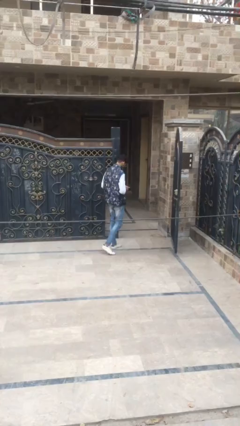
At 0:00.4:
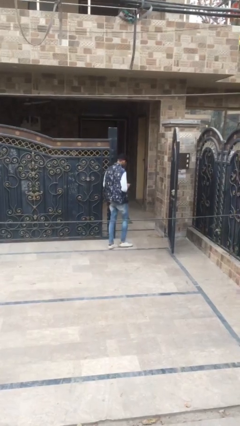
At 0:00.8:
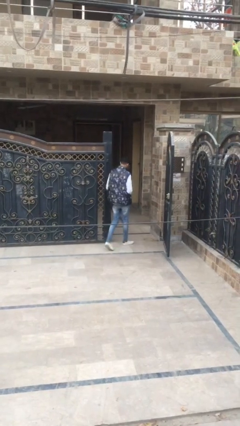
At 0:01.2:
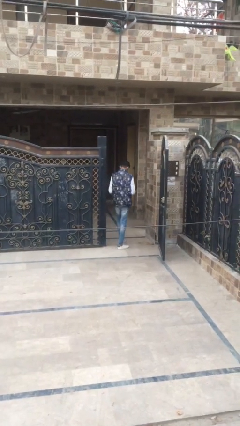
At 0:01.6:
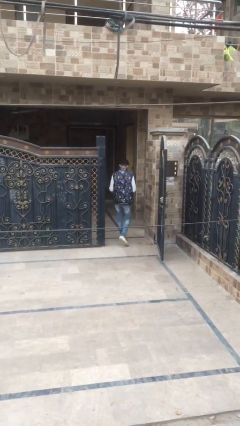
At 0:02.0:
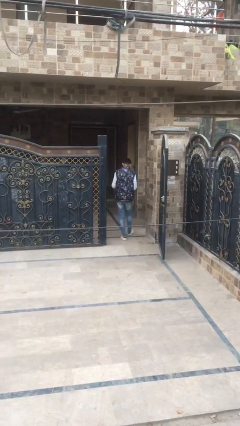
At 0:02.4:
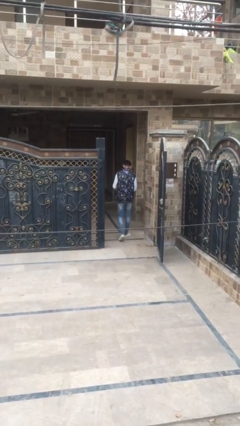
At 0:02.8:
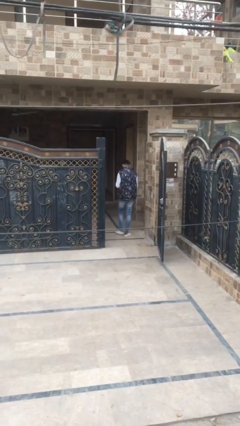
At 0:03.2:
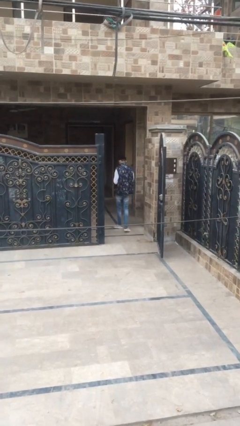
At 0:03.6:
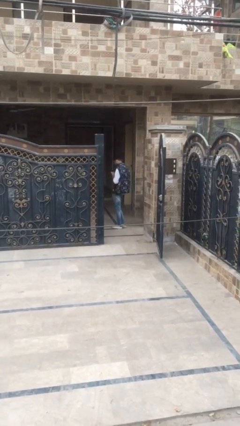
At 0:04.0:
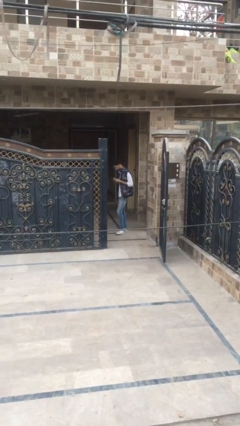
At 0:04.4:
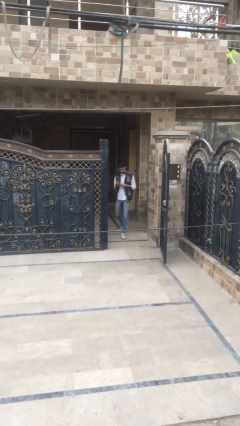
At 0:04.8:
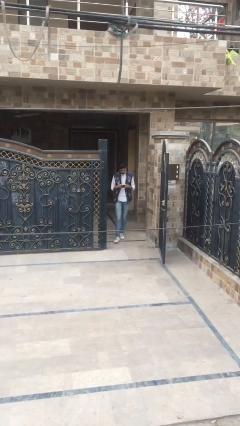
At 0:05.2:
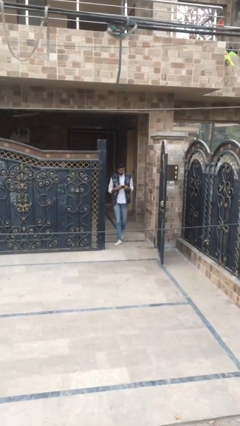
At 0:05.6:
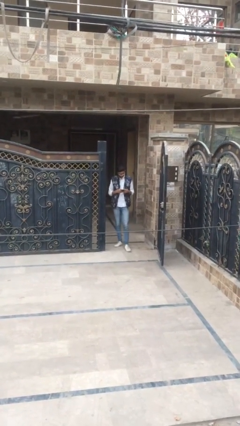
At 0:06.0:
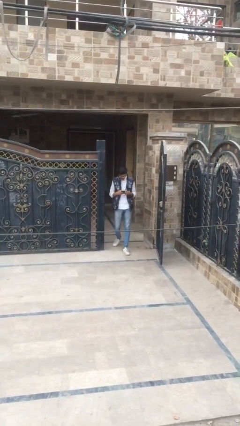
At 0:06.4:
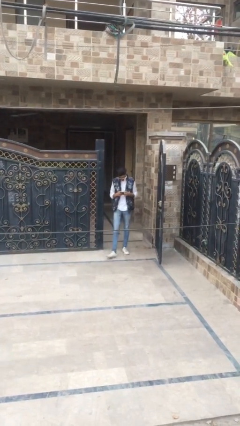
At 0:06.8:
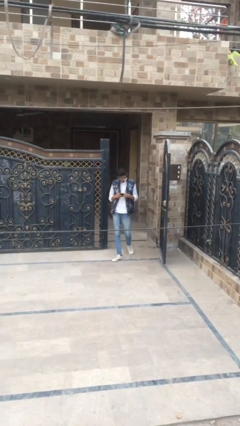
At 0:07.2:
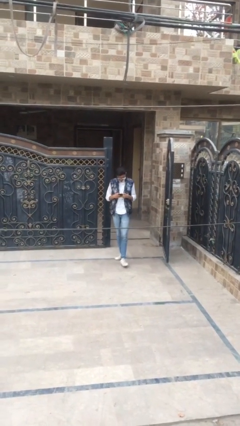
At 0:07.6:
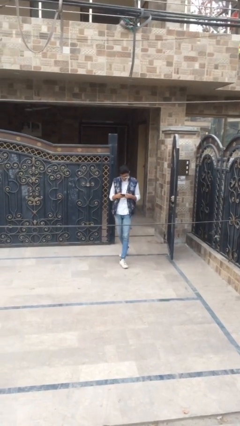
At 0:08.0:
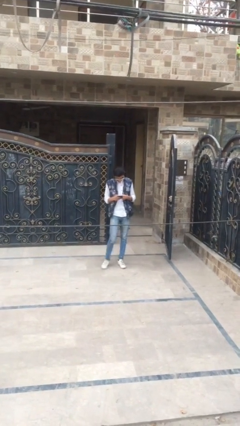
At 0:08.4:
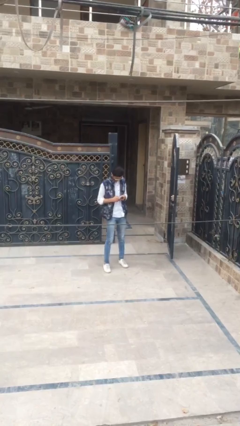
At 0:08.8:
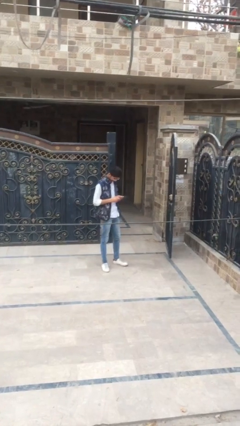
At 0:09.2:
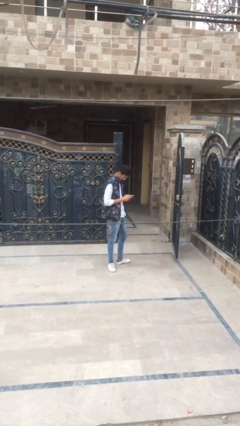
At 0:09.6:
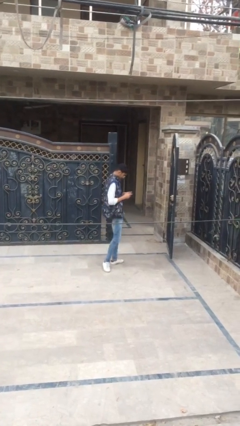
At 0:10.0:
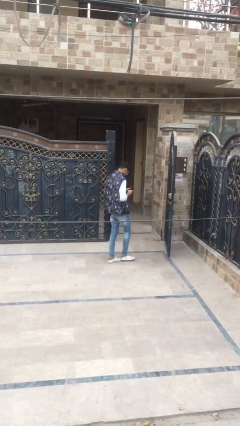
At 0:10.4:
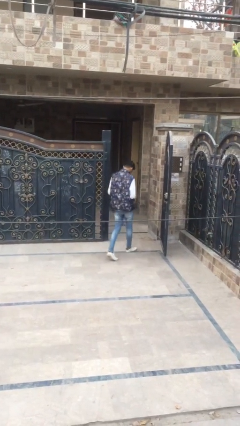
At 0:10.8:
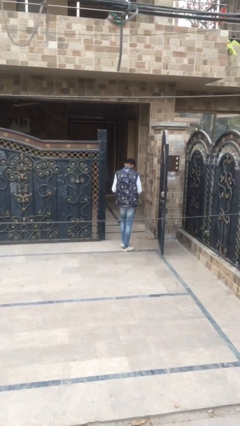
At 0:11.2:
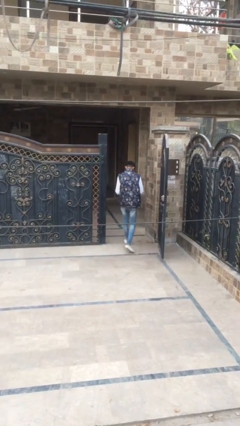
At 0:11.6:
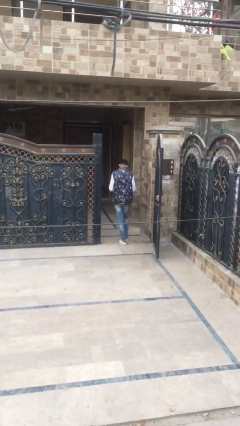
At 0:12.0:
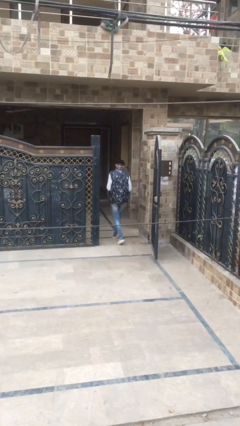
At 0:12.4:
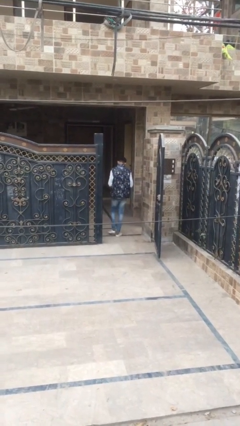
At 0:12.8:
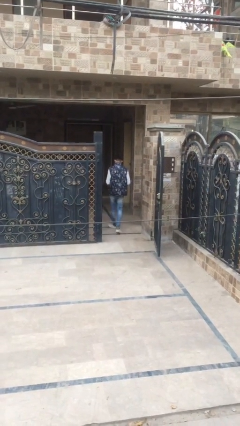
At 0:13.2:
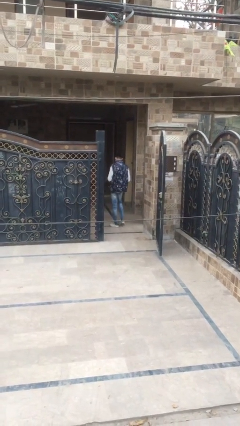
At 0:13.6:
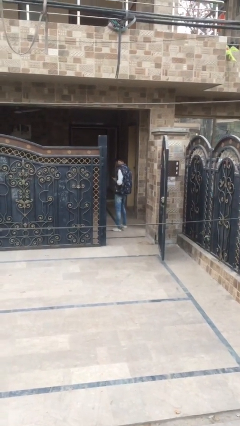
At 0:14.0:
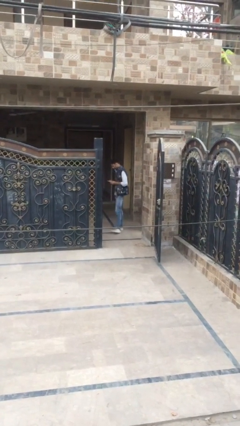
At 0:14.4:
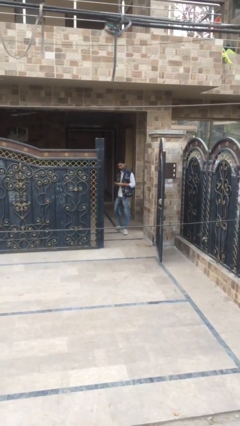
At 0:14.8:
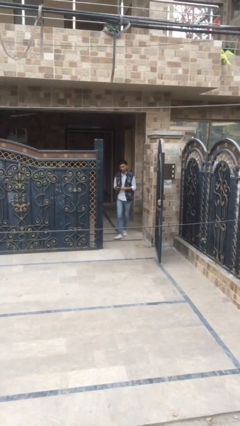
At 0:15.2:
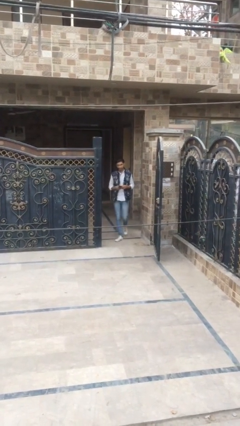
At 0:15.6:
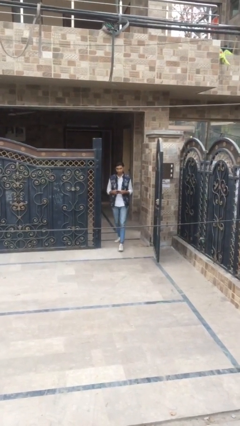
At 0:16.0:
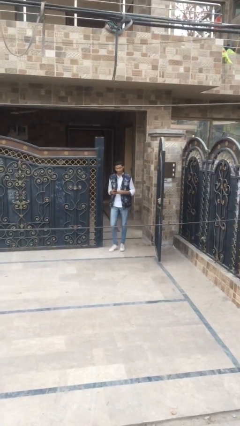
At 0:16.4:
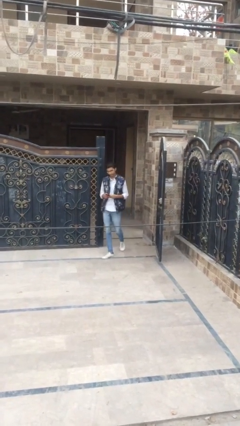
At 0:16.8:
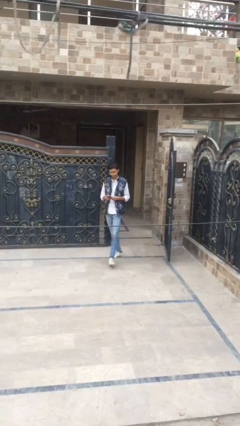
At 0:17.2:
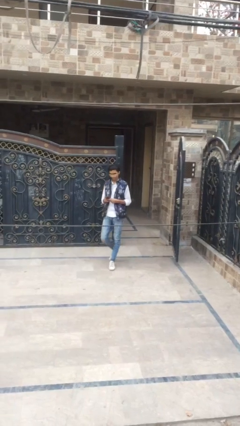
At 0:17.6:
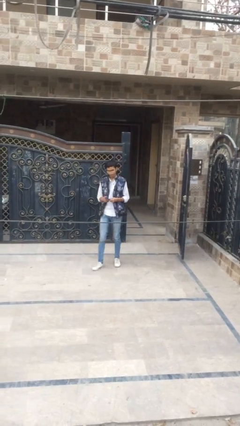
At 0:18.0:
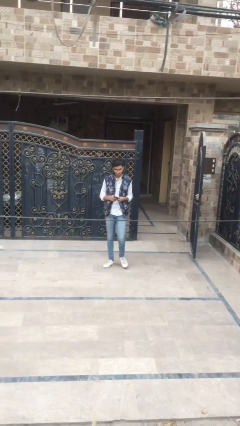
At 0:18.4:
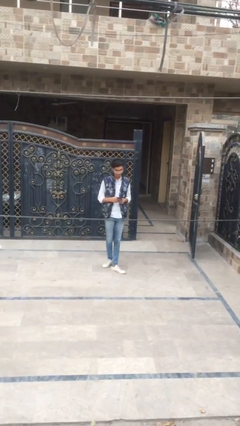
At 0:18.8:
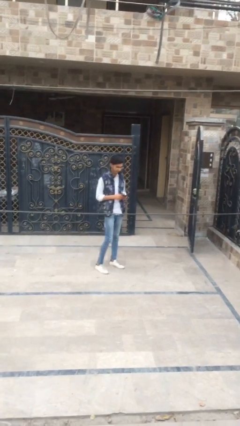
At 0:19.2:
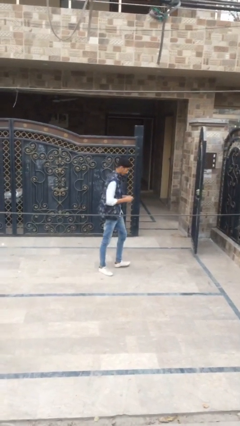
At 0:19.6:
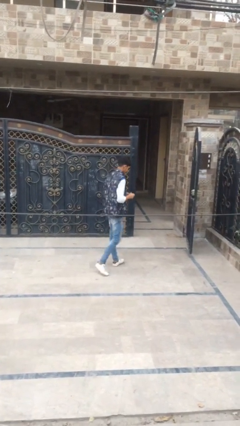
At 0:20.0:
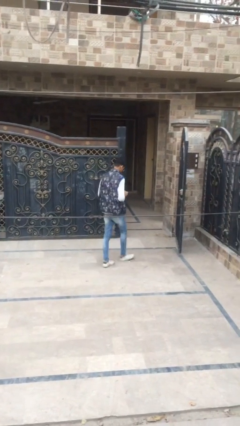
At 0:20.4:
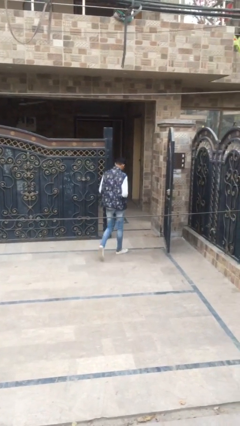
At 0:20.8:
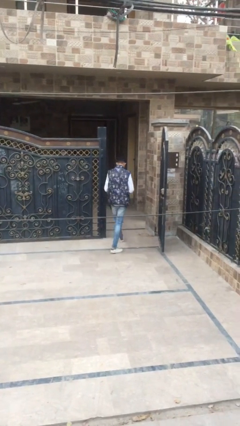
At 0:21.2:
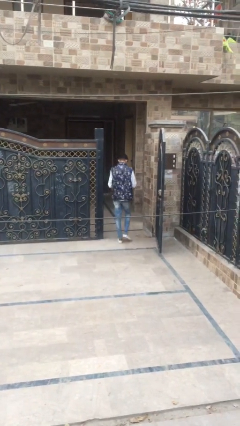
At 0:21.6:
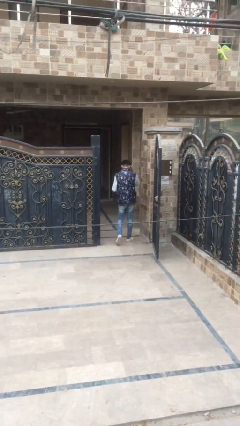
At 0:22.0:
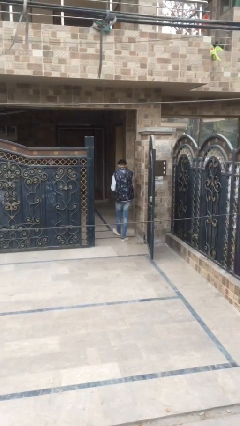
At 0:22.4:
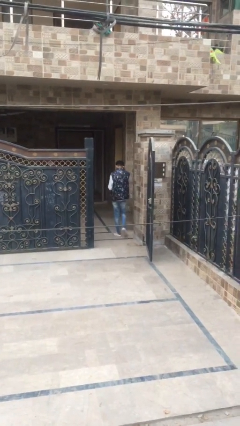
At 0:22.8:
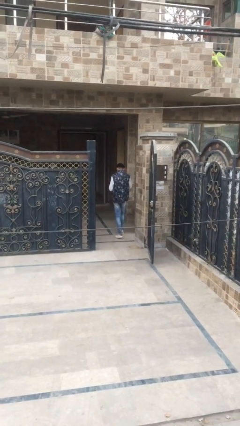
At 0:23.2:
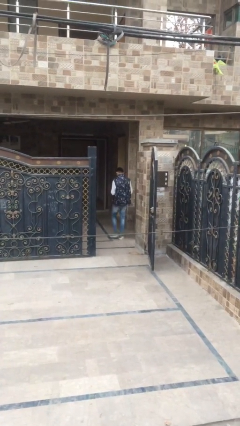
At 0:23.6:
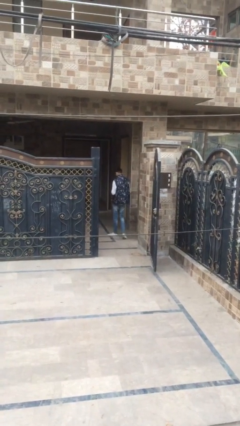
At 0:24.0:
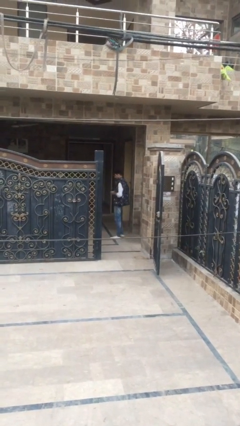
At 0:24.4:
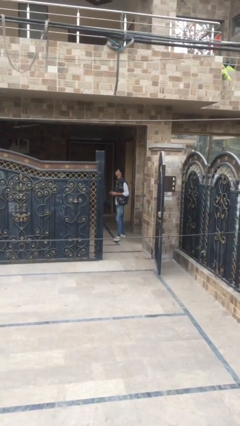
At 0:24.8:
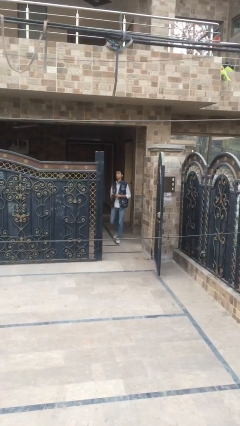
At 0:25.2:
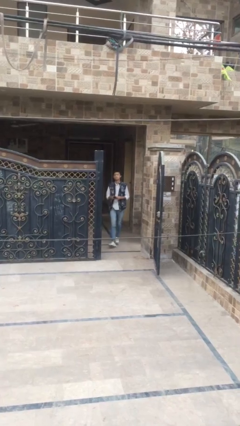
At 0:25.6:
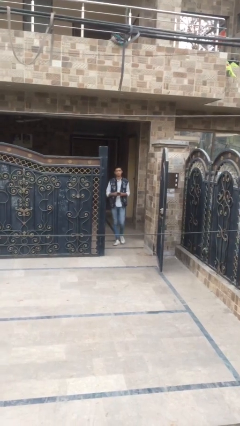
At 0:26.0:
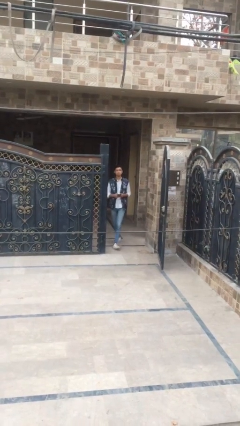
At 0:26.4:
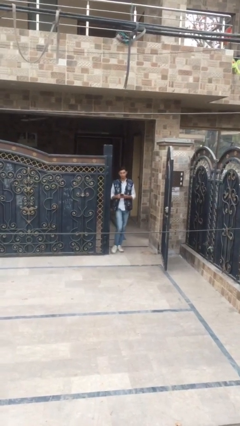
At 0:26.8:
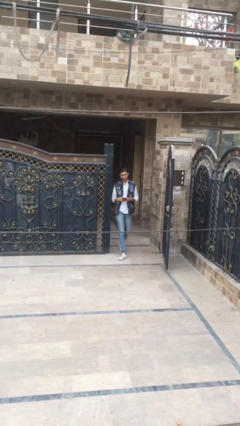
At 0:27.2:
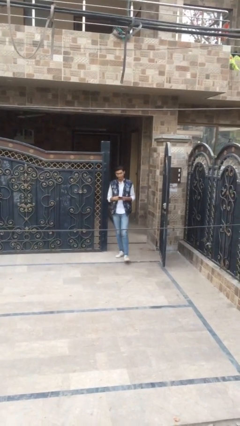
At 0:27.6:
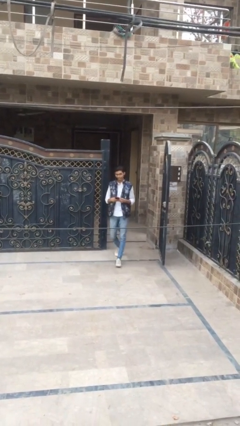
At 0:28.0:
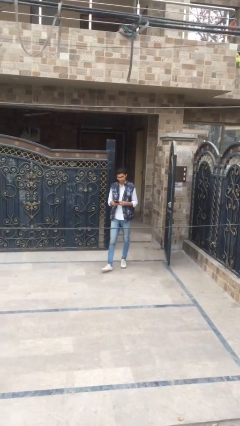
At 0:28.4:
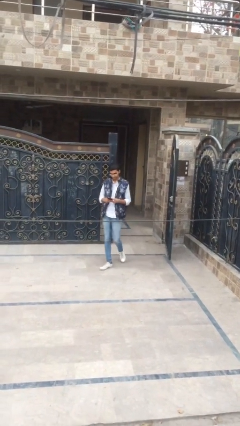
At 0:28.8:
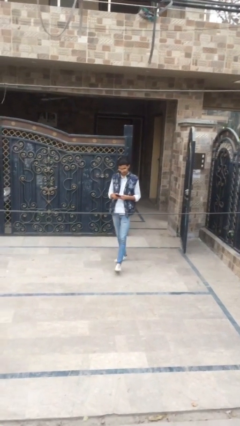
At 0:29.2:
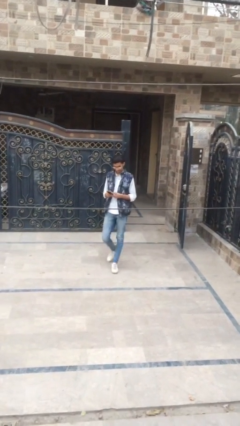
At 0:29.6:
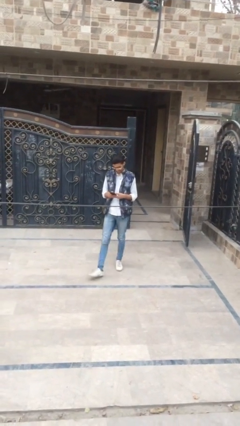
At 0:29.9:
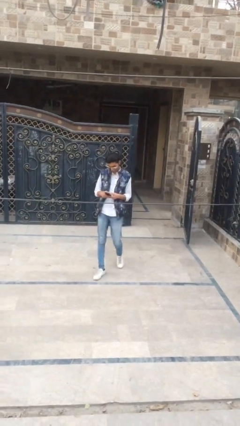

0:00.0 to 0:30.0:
person texts on phone

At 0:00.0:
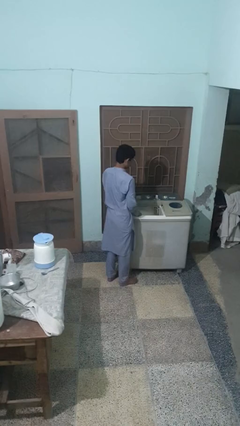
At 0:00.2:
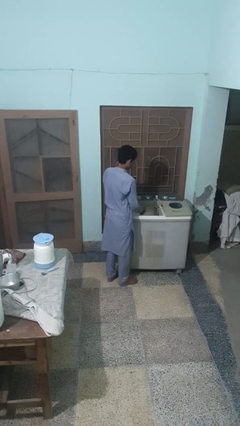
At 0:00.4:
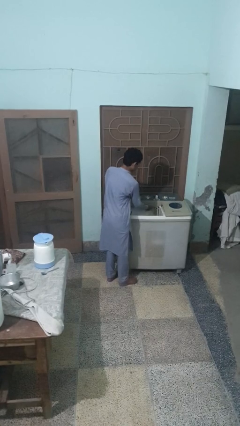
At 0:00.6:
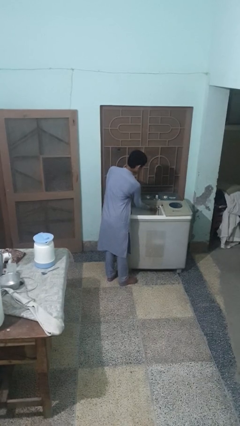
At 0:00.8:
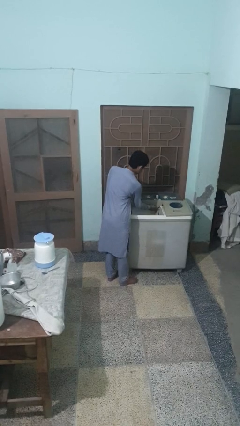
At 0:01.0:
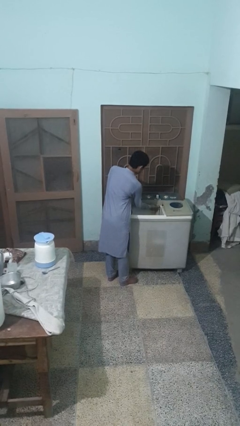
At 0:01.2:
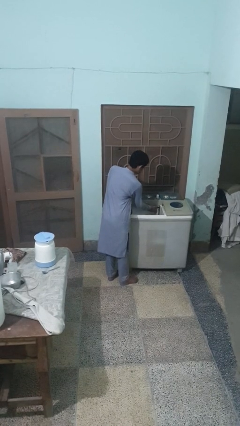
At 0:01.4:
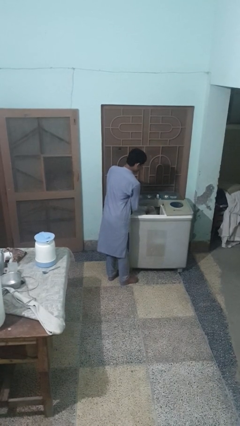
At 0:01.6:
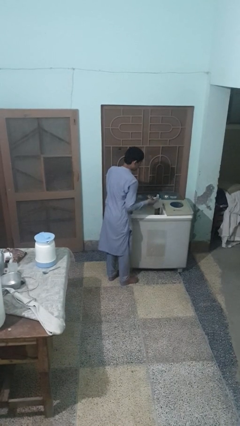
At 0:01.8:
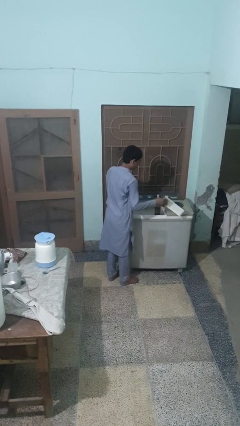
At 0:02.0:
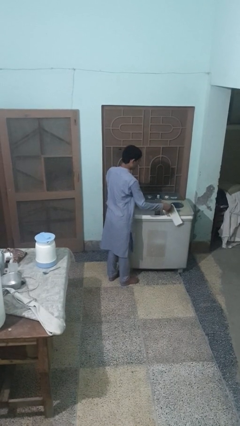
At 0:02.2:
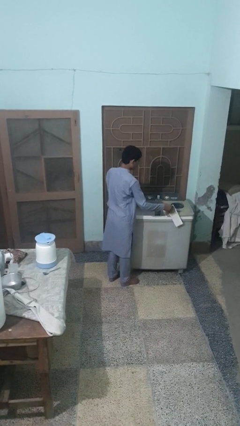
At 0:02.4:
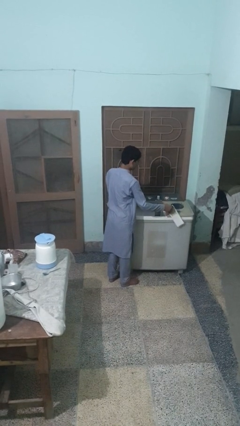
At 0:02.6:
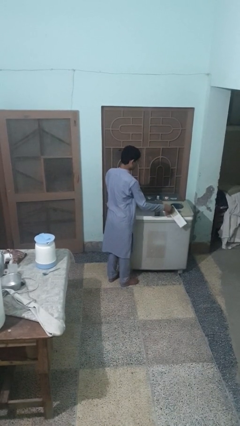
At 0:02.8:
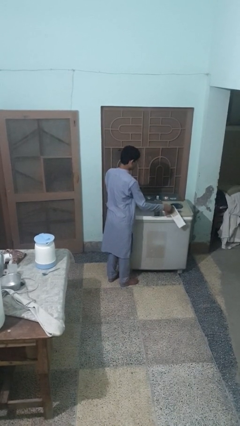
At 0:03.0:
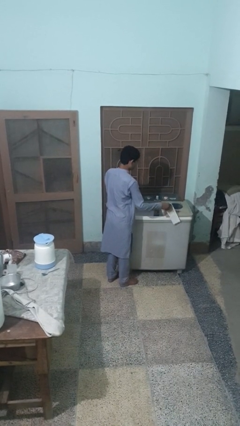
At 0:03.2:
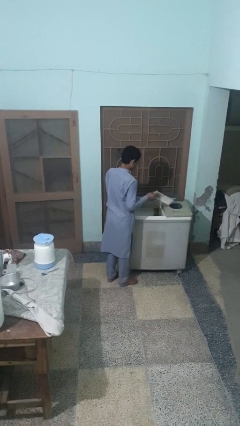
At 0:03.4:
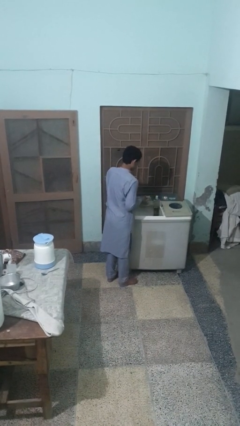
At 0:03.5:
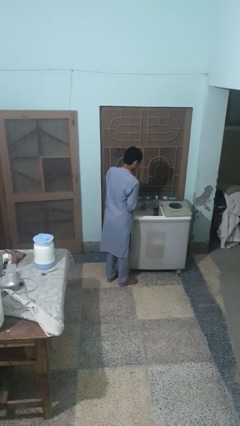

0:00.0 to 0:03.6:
person cleans dryer lint trap
